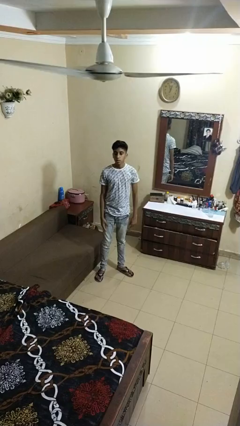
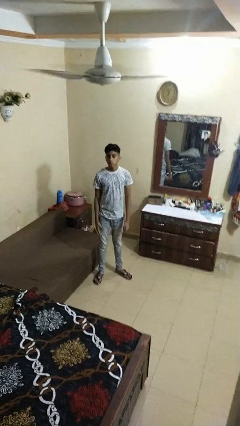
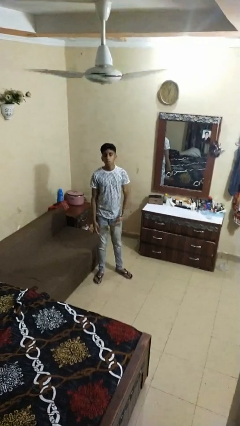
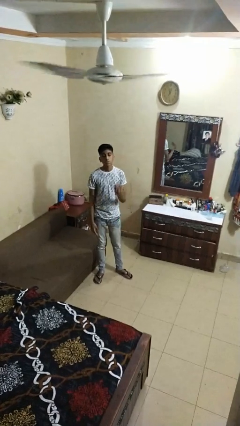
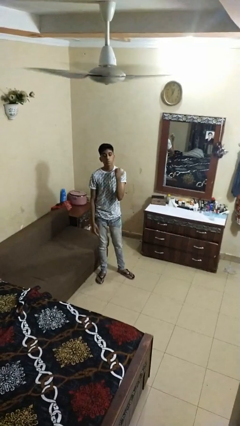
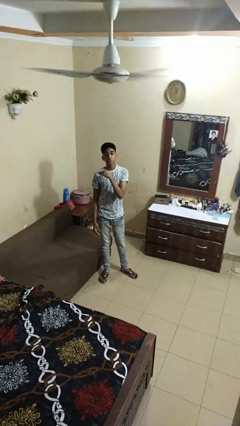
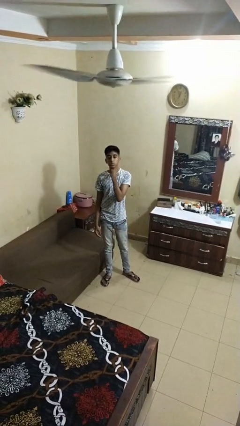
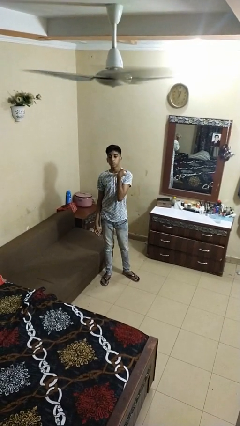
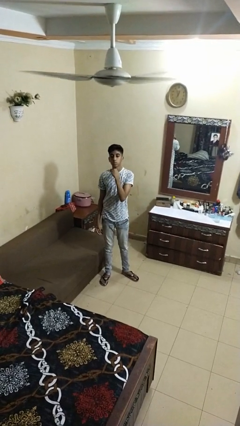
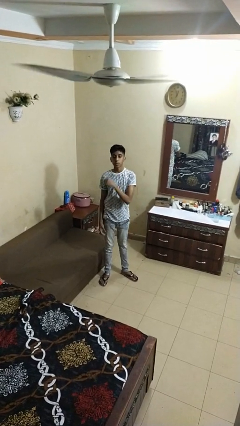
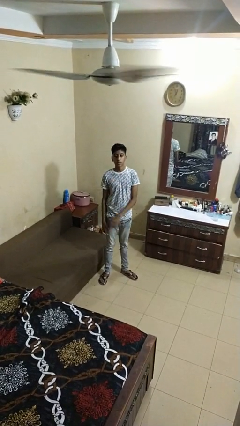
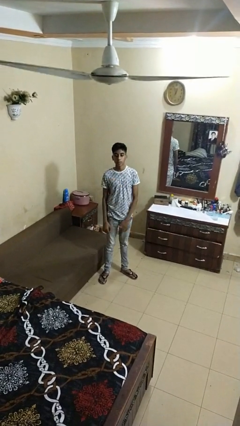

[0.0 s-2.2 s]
person gestures cut

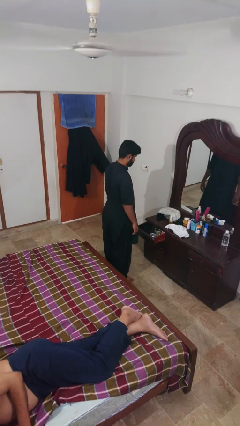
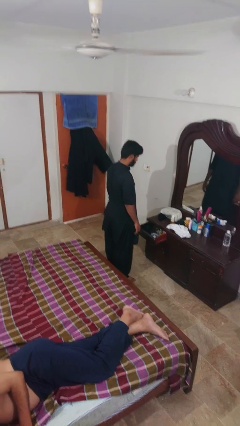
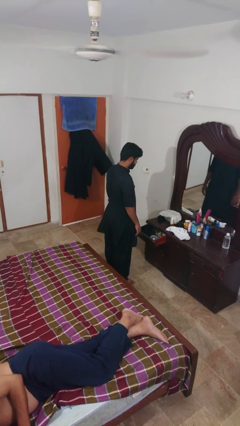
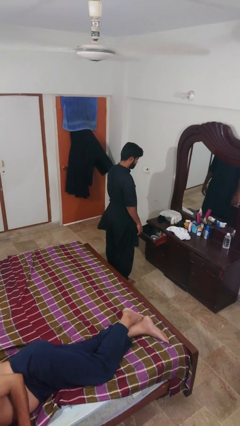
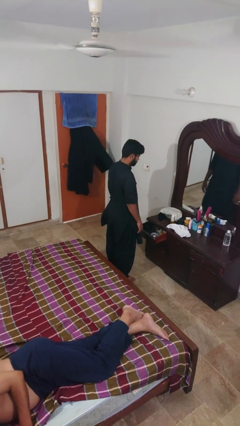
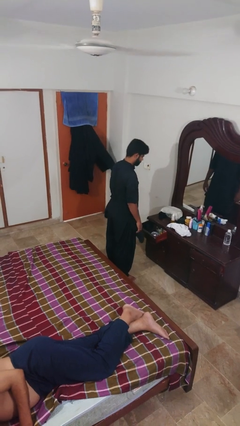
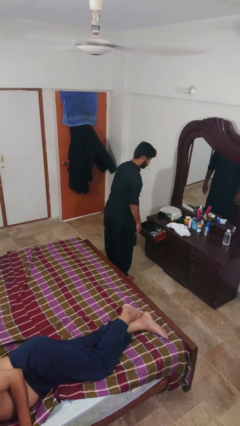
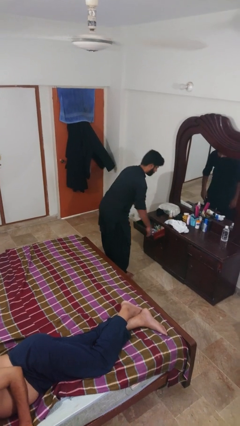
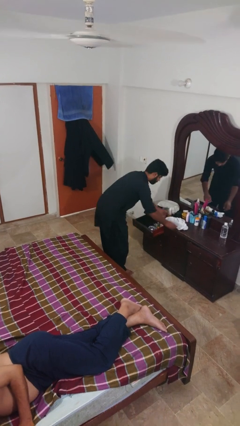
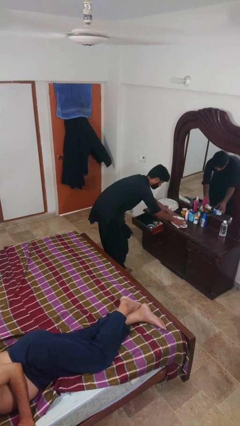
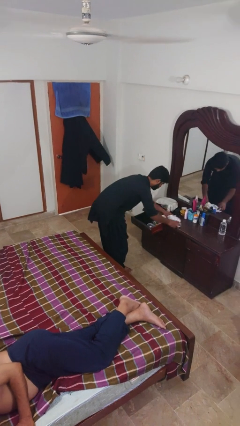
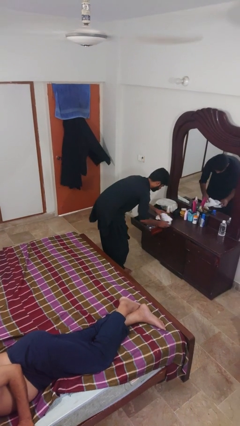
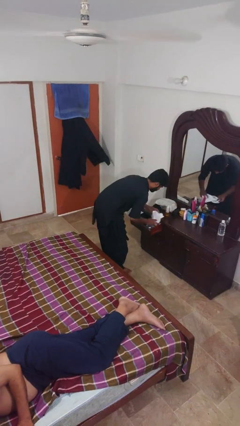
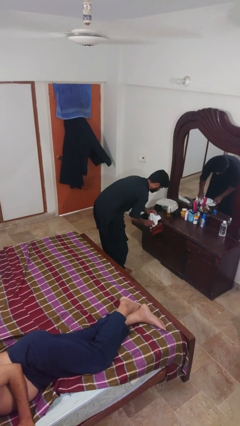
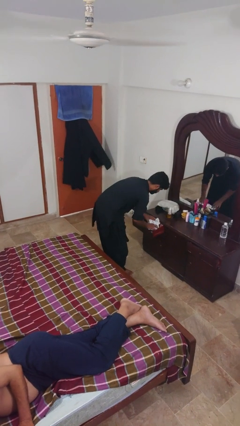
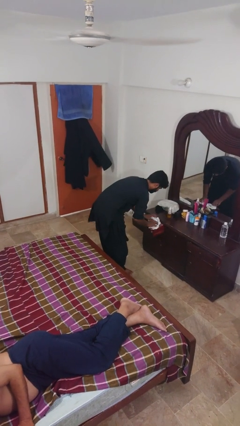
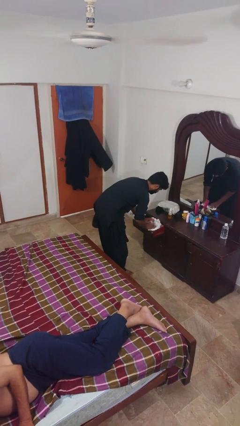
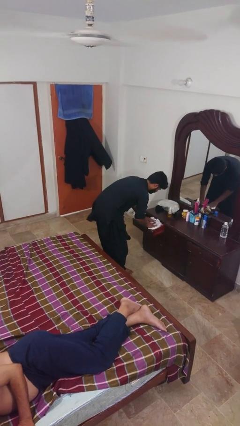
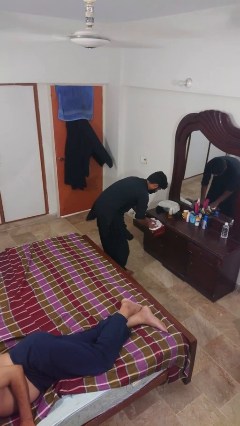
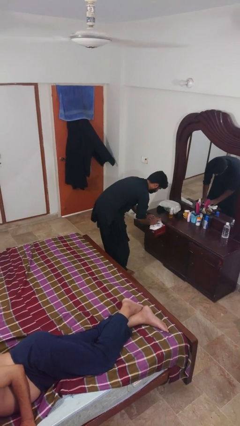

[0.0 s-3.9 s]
person puts clothes into dresser

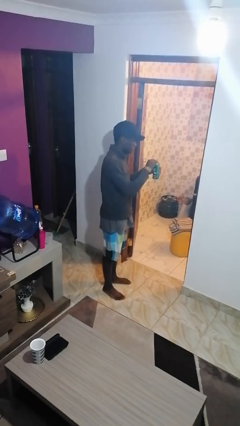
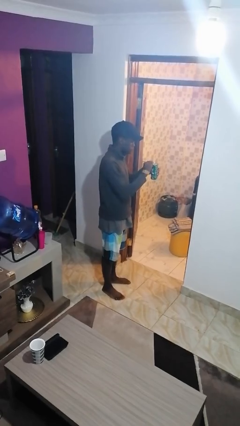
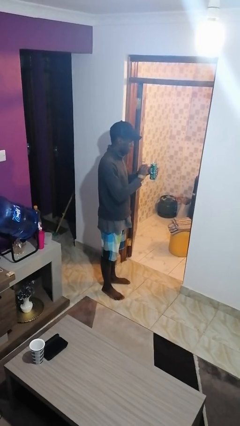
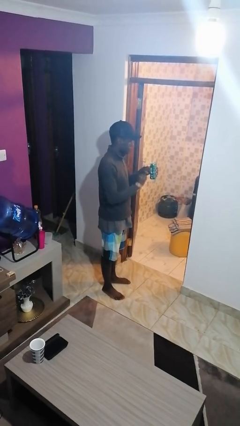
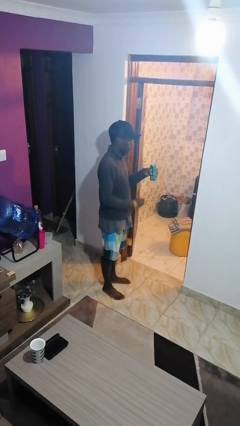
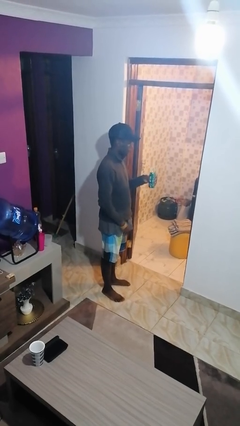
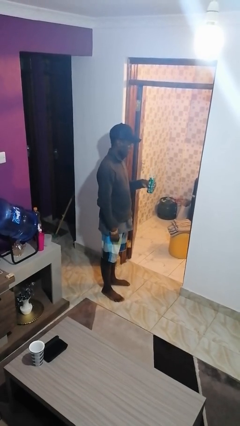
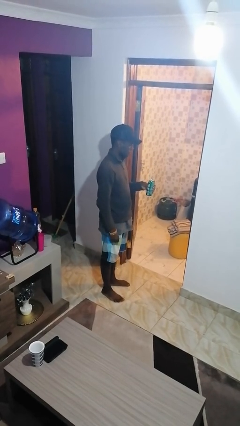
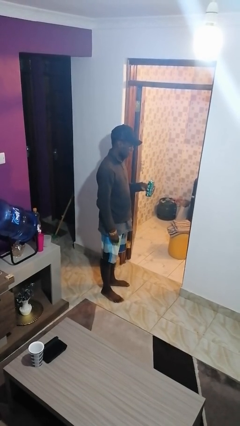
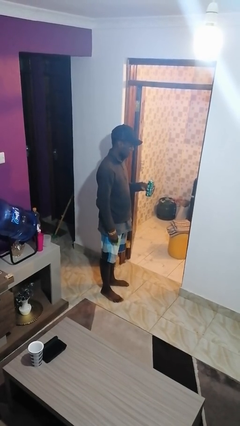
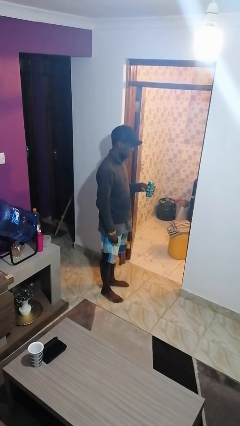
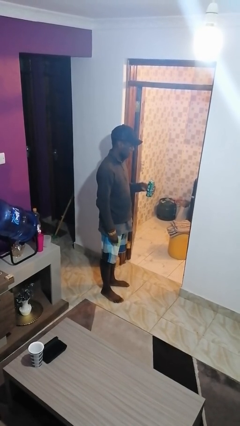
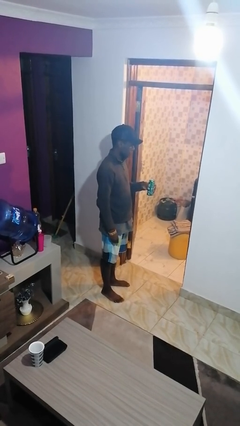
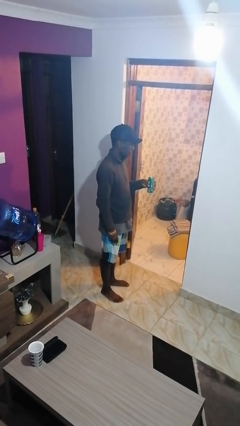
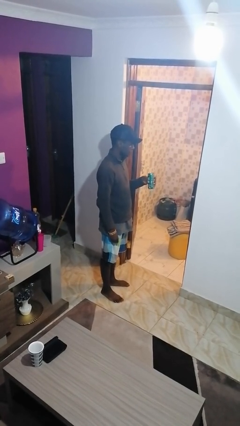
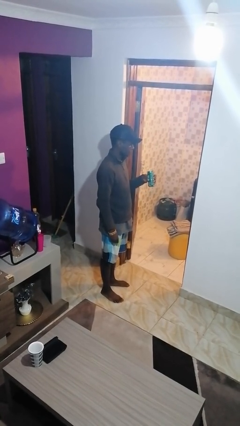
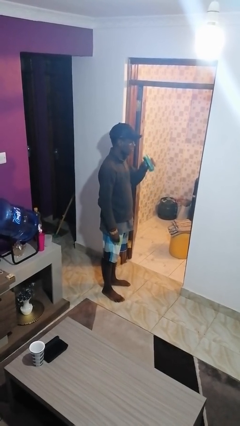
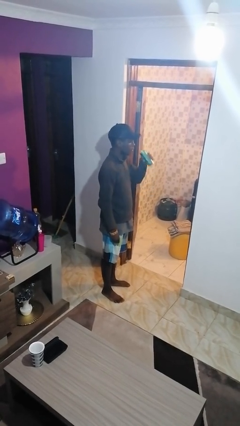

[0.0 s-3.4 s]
person opens beverage can

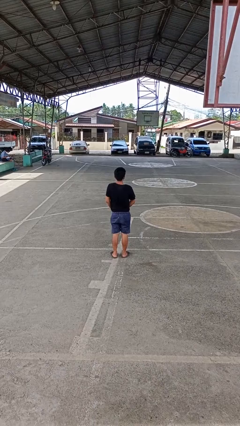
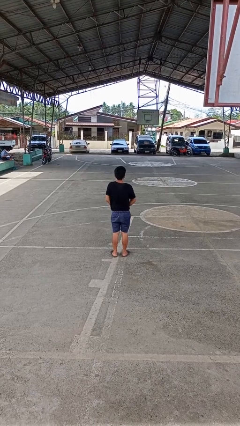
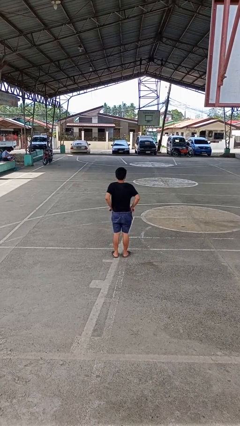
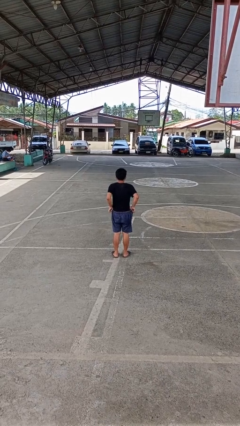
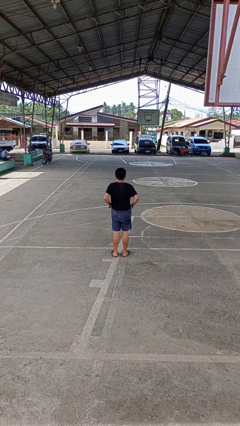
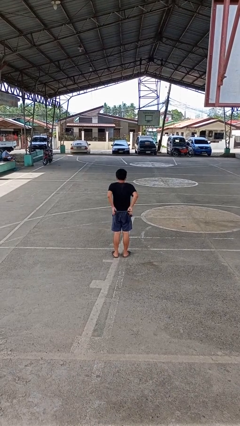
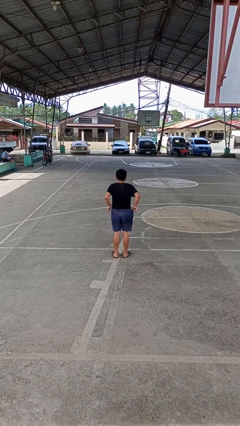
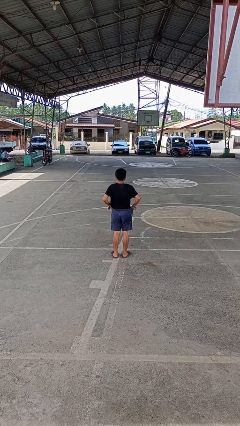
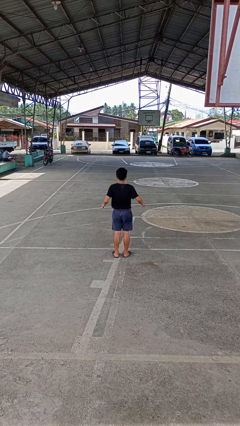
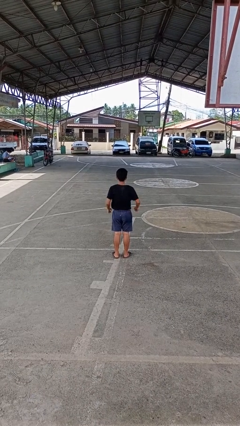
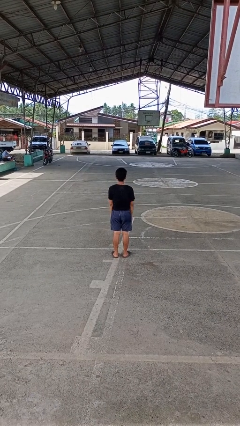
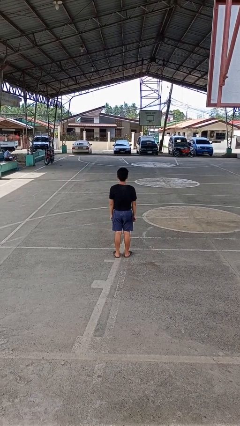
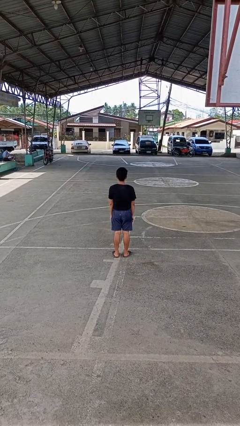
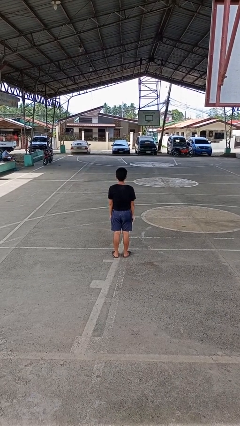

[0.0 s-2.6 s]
person hikes up pants

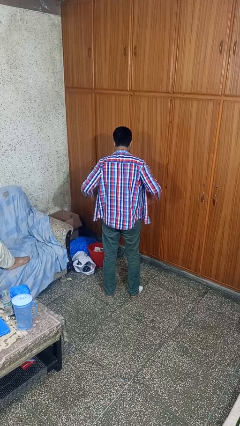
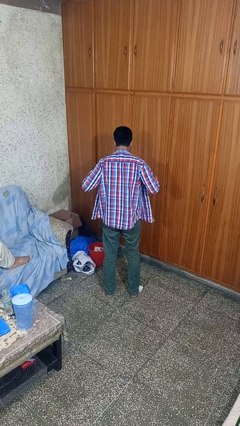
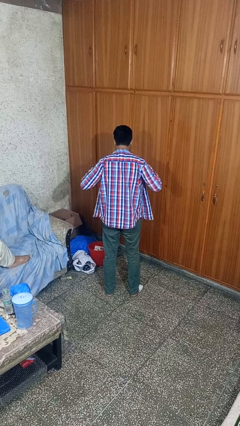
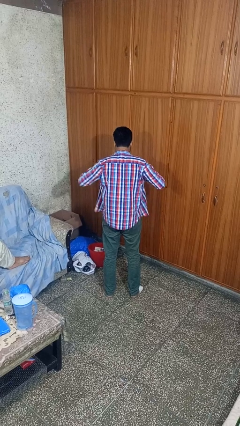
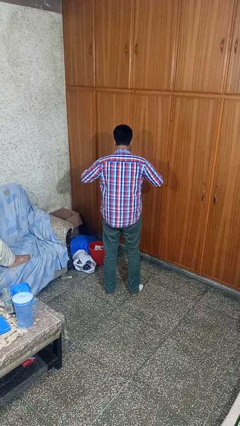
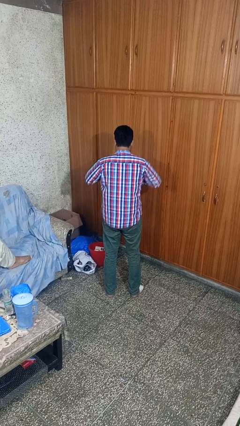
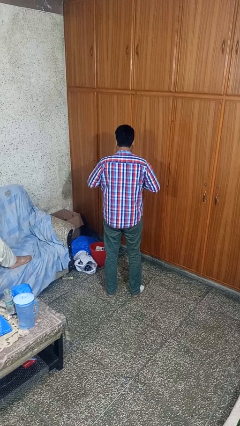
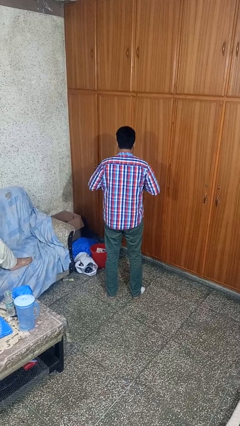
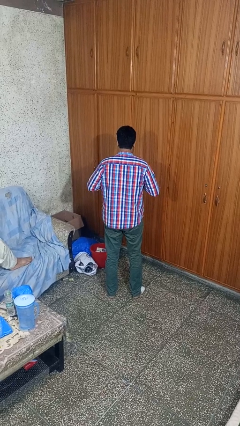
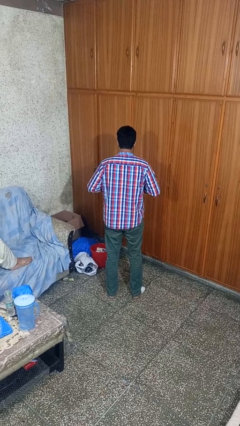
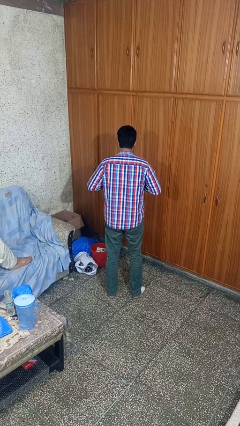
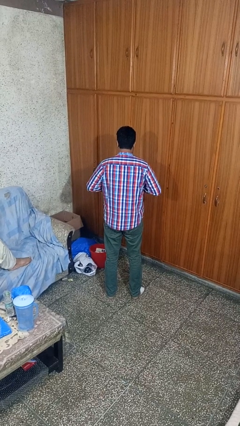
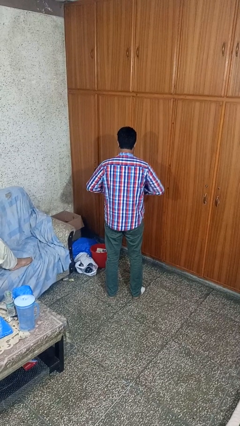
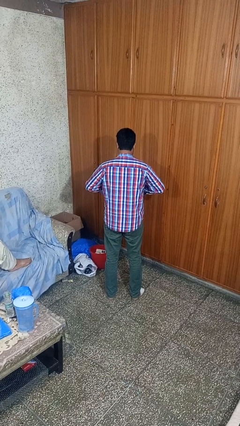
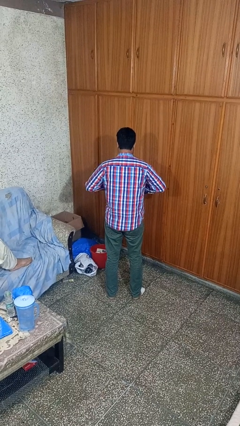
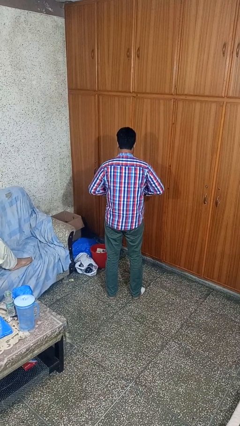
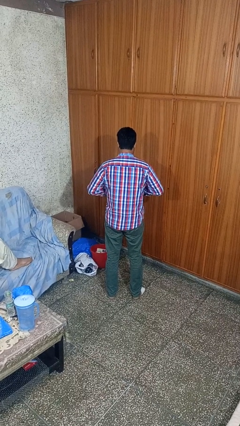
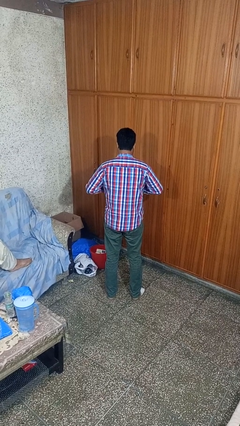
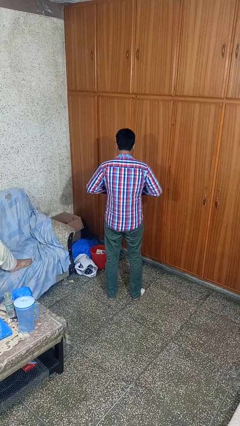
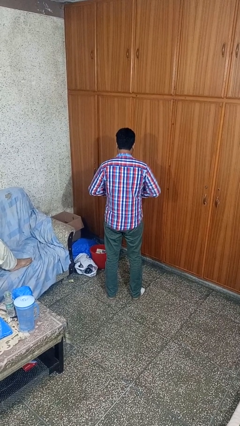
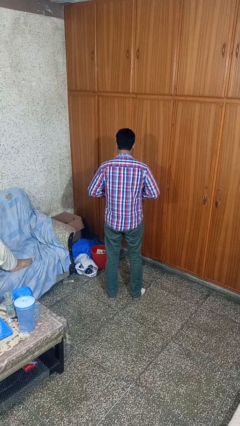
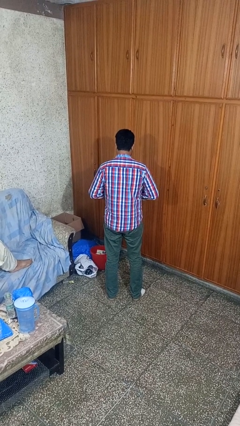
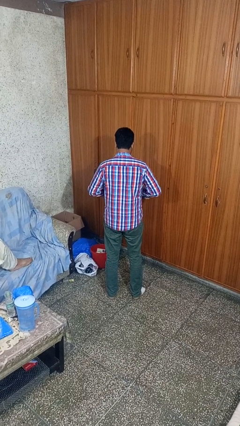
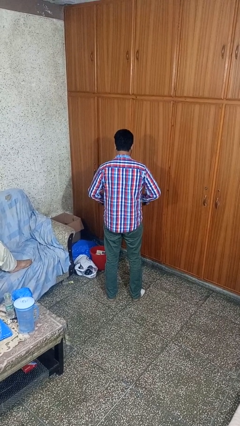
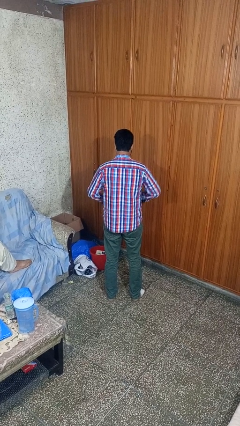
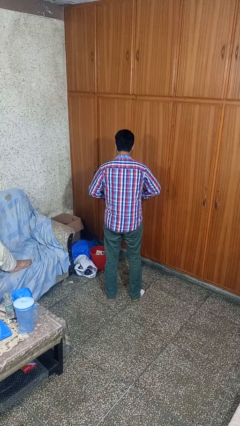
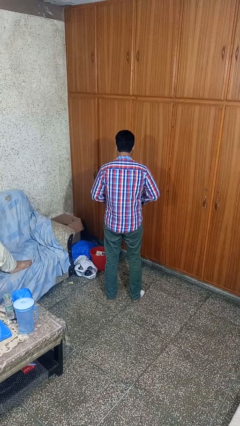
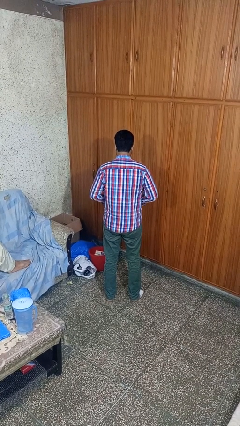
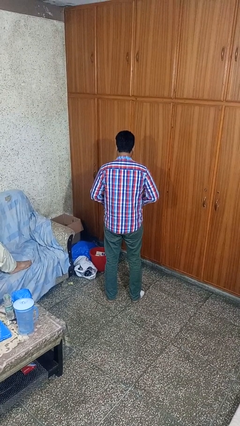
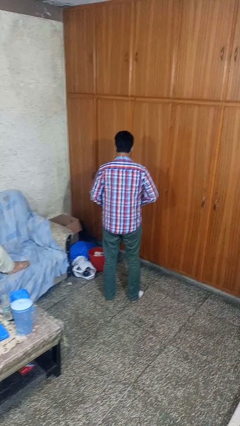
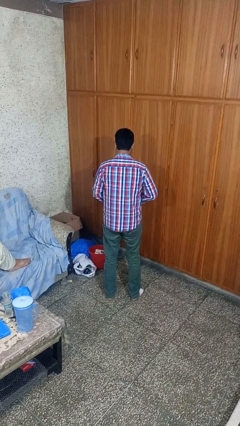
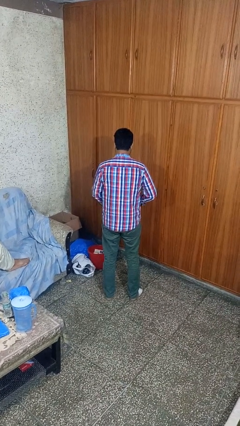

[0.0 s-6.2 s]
person buttons shirt
